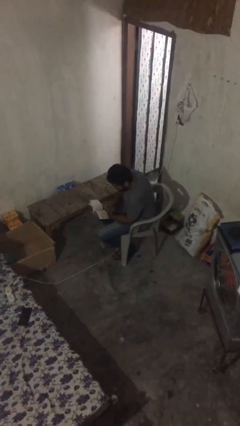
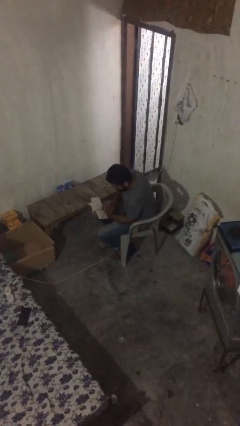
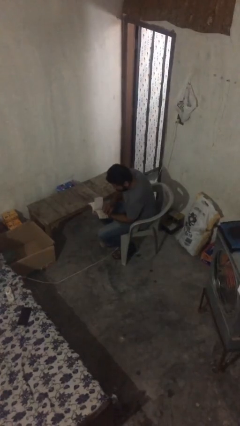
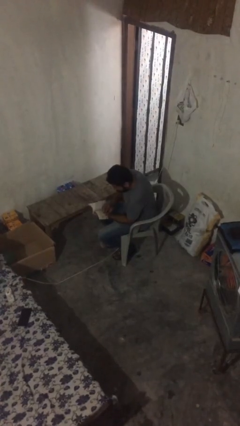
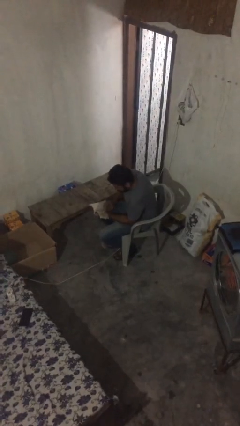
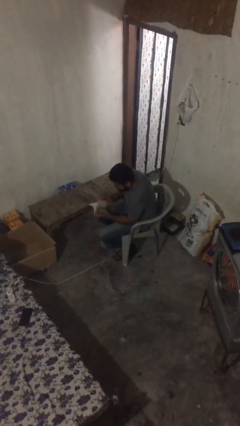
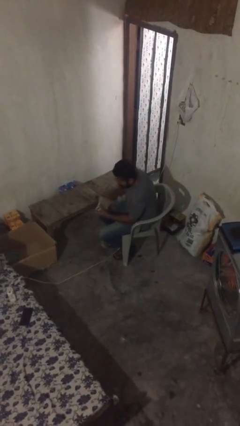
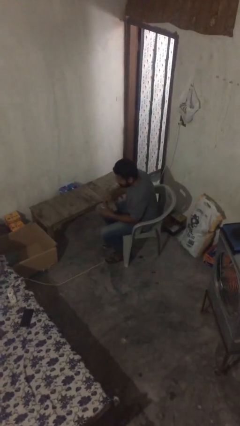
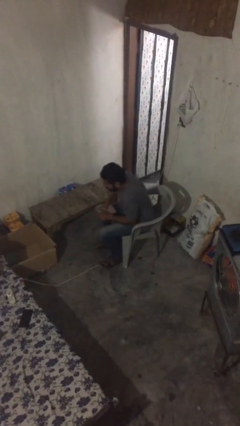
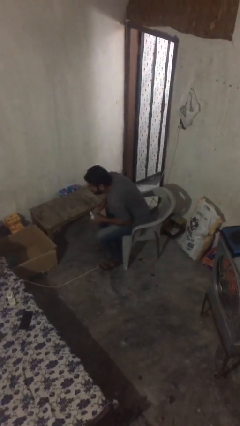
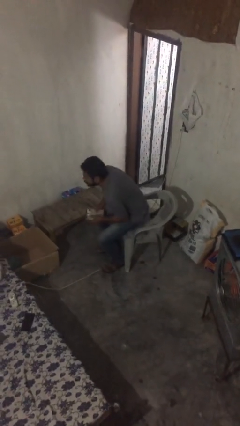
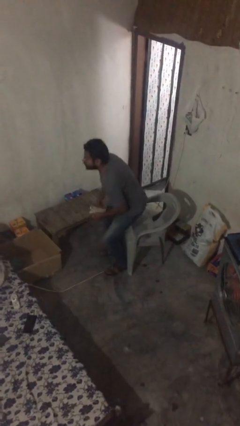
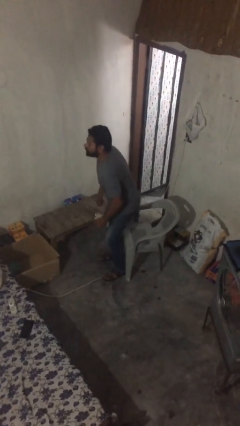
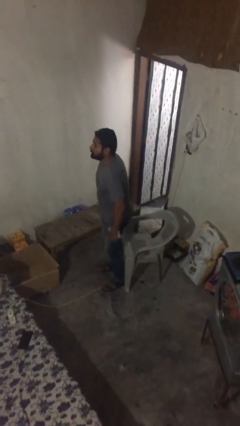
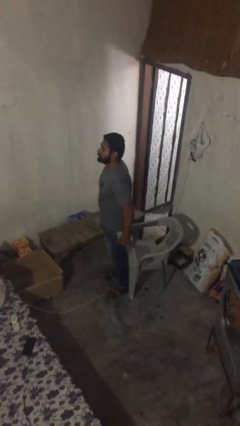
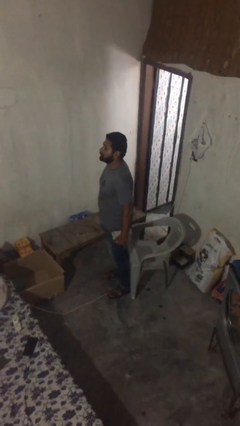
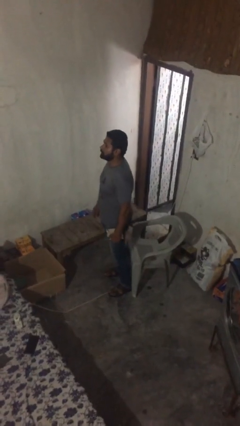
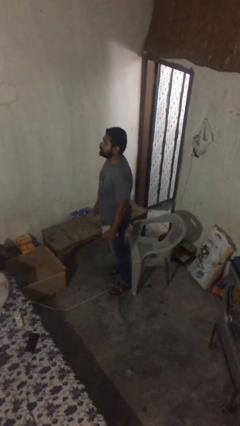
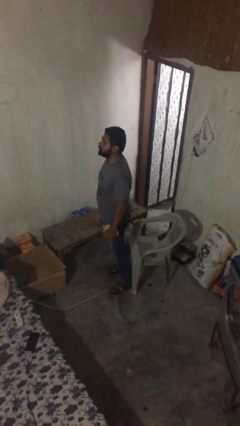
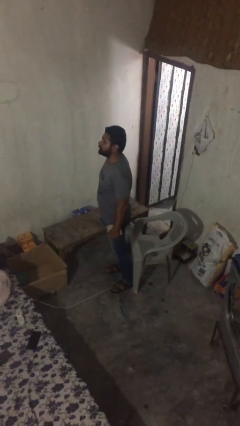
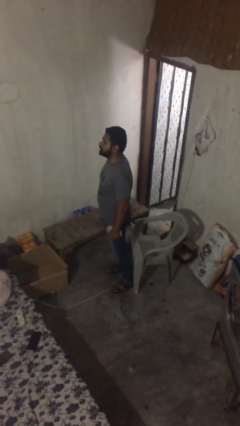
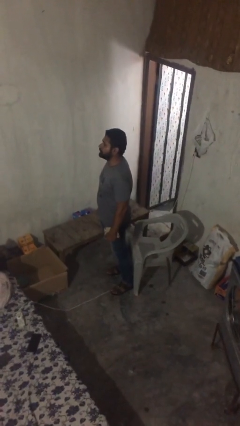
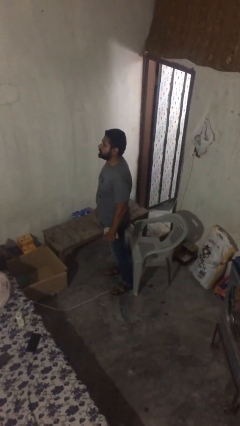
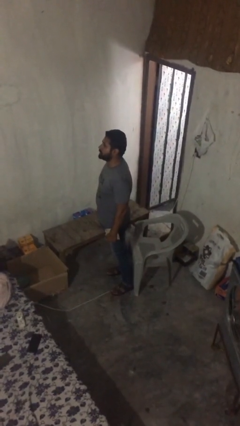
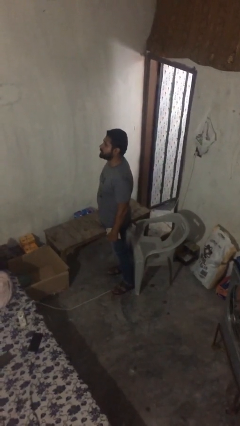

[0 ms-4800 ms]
person stands up

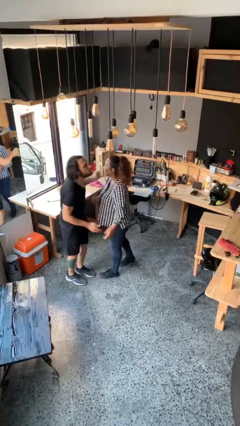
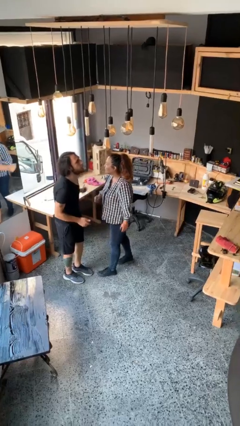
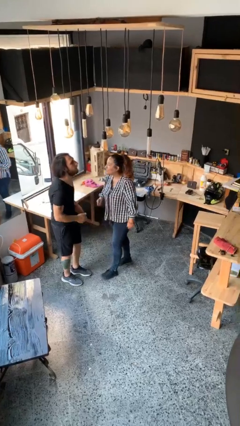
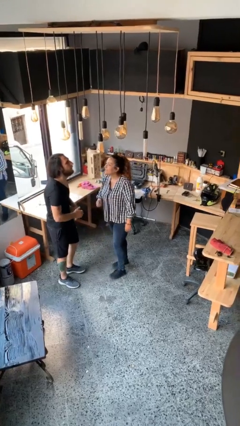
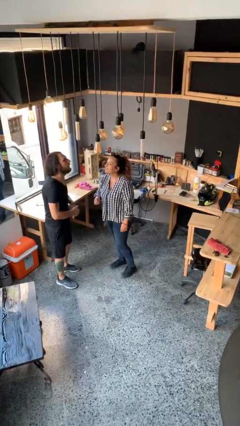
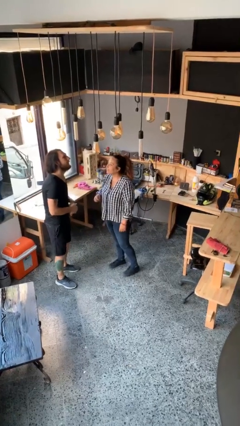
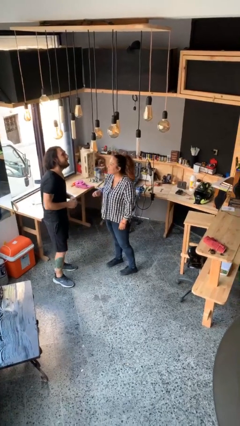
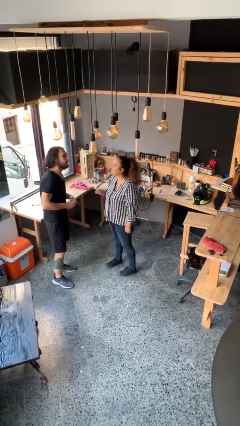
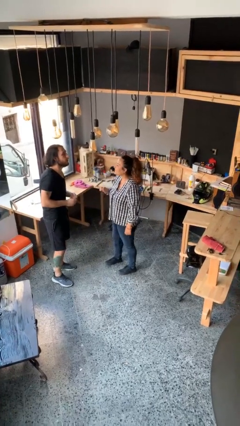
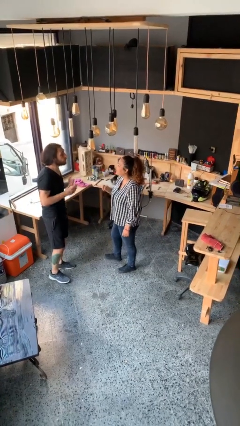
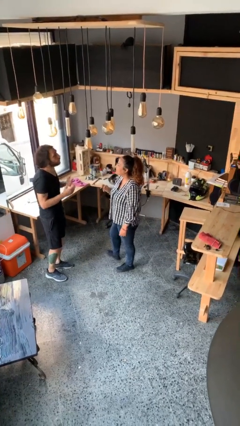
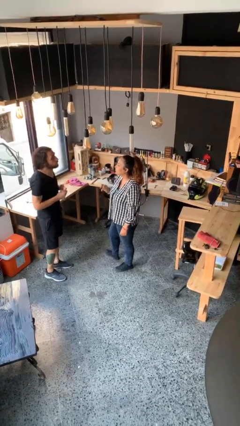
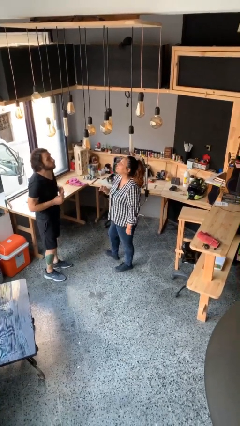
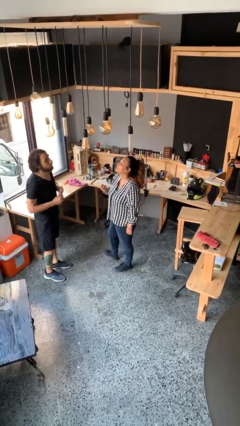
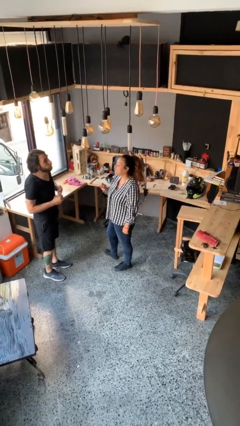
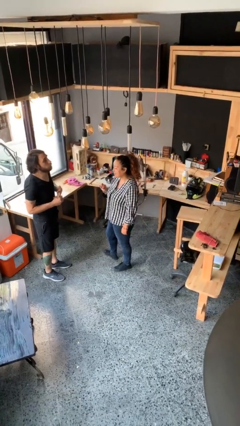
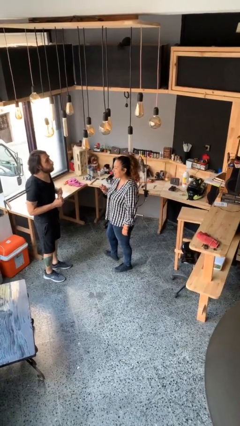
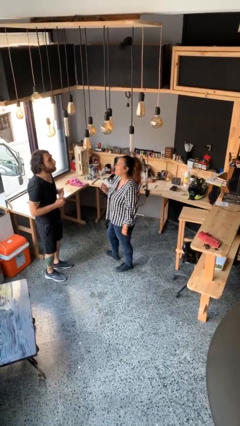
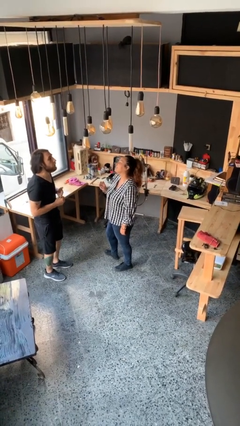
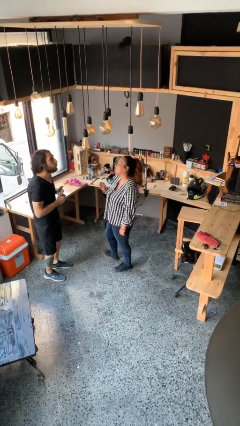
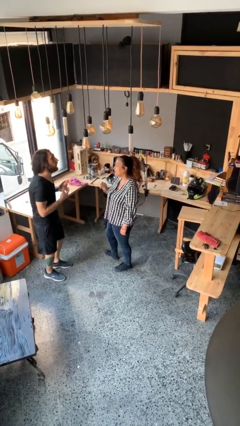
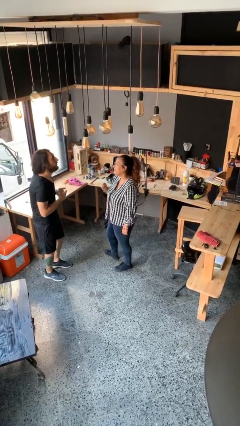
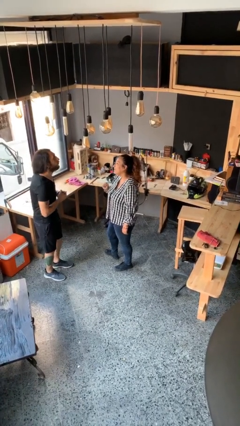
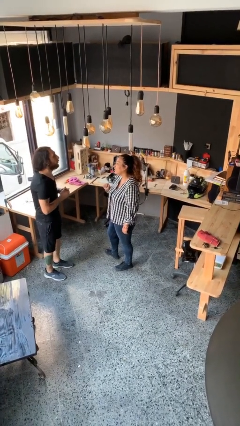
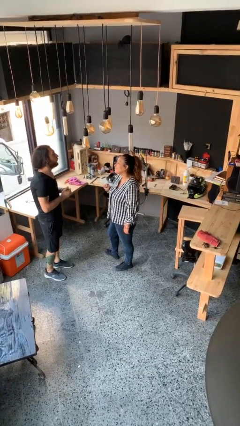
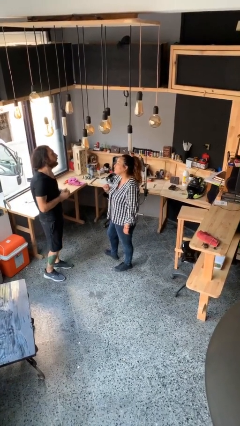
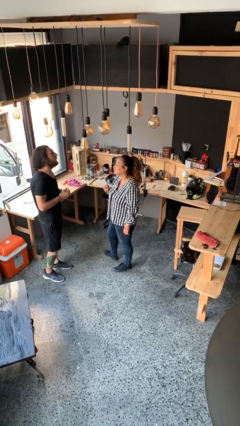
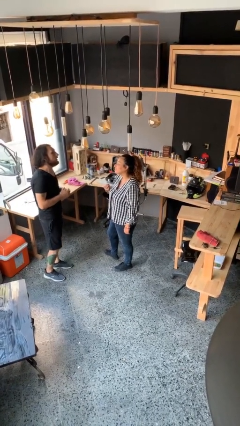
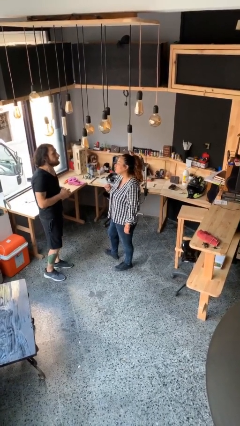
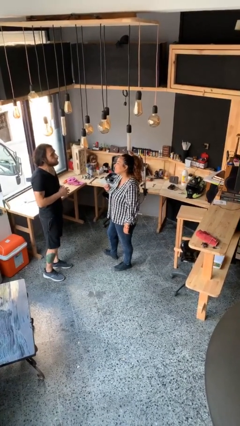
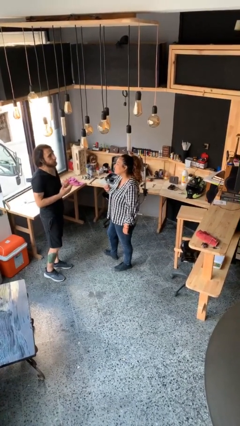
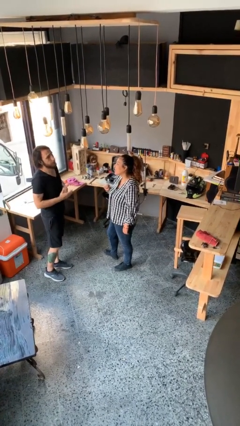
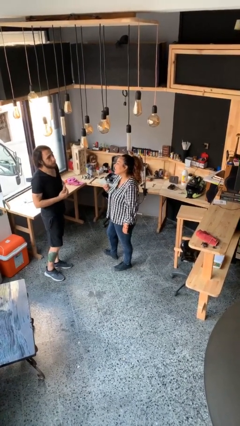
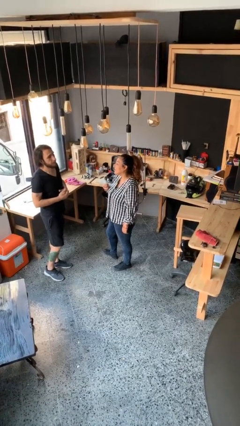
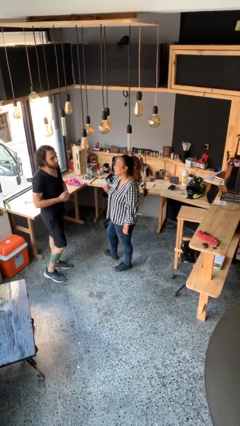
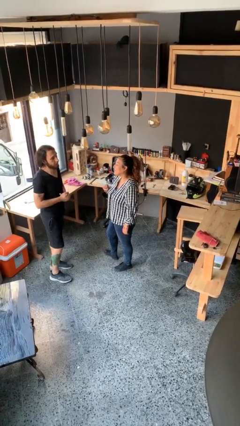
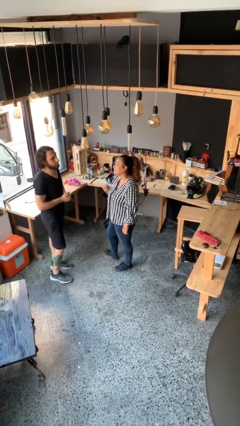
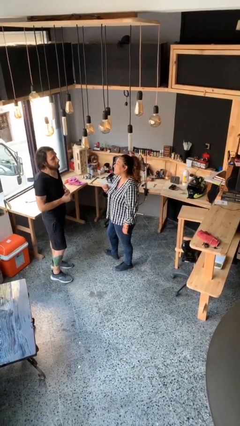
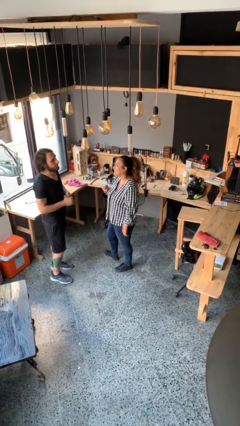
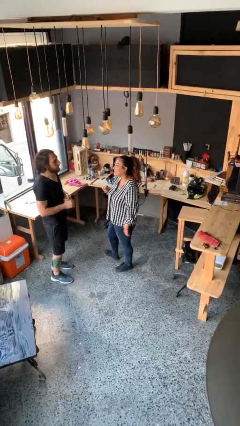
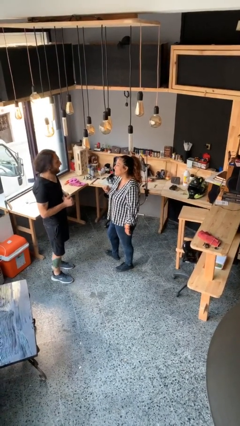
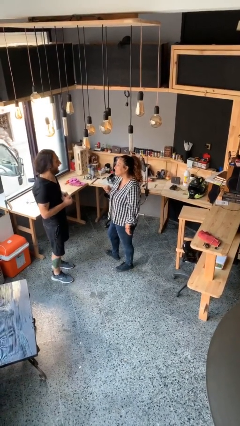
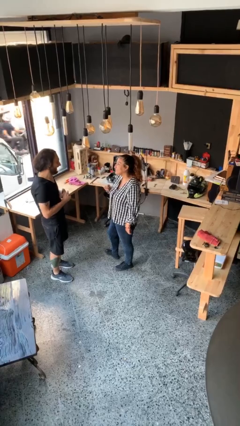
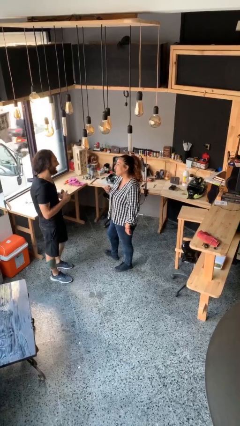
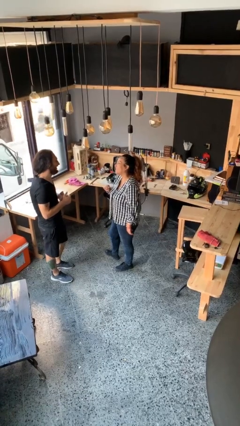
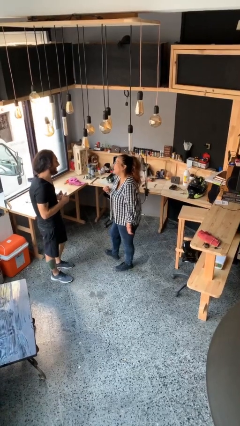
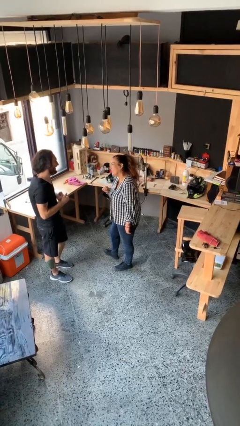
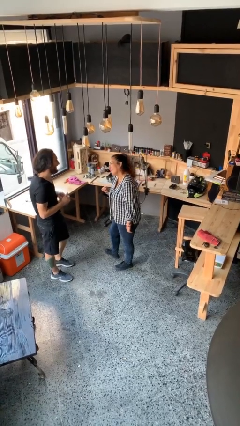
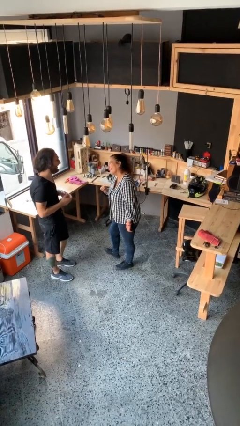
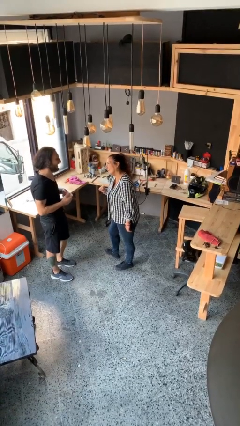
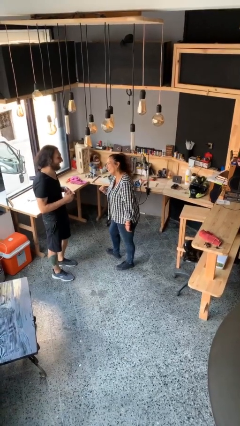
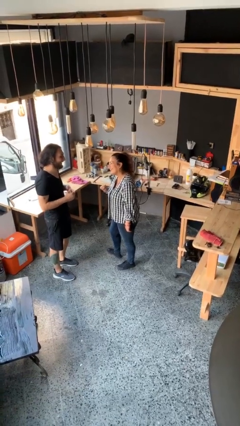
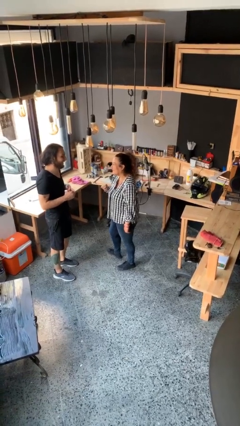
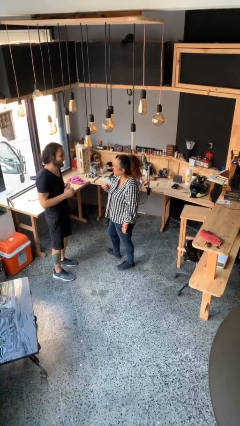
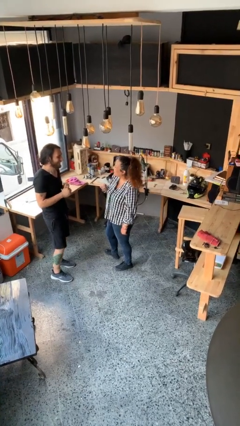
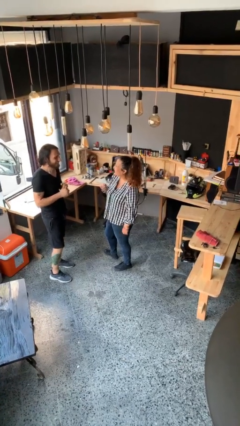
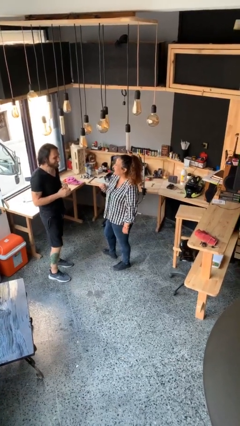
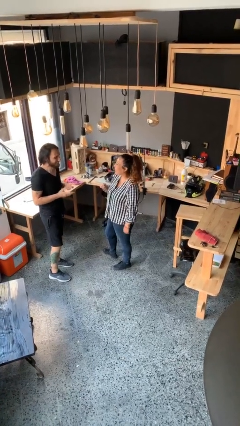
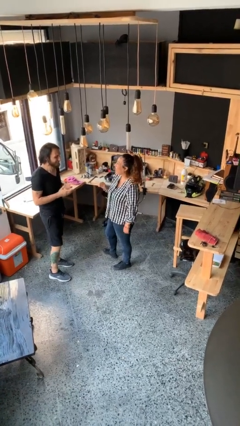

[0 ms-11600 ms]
person talks to person

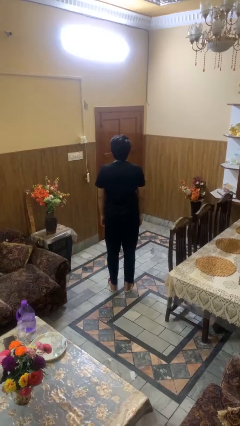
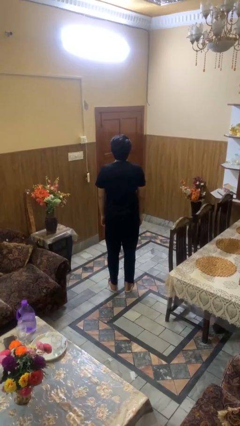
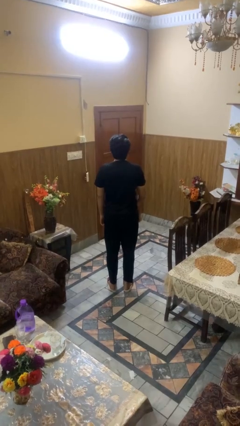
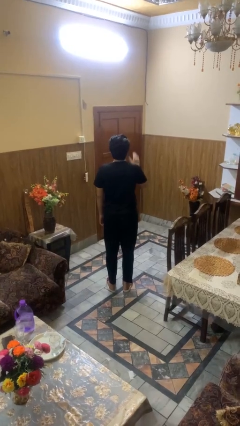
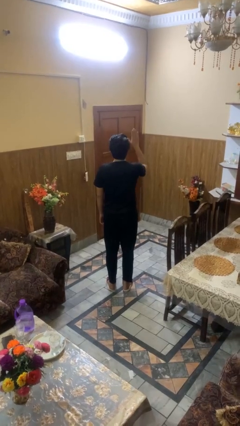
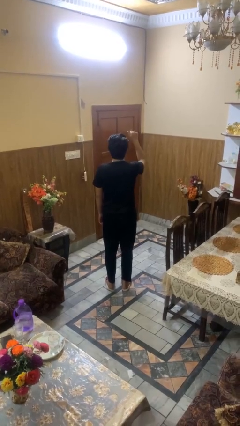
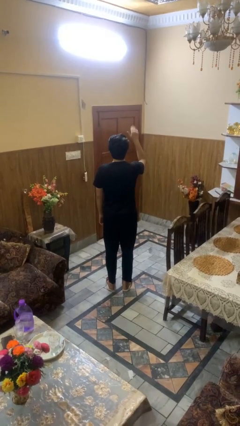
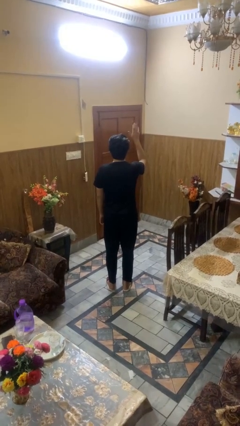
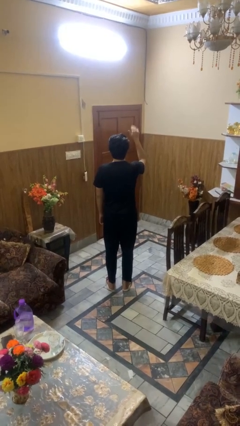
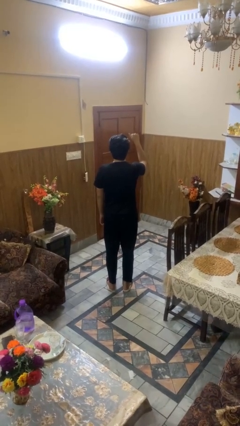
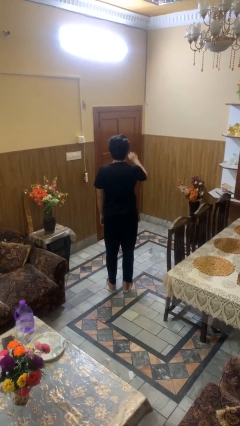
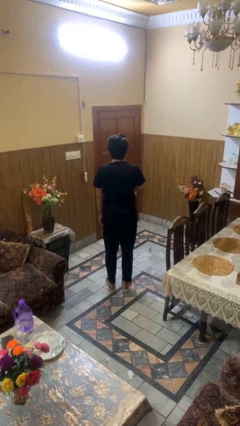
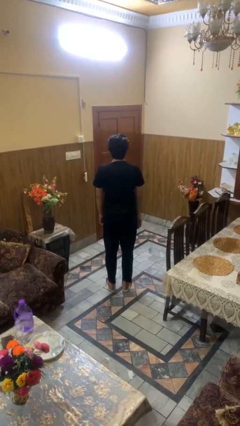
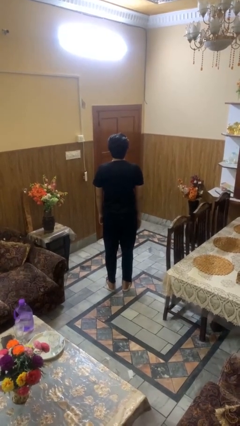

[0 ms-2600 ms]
person gestures come here
